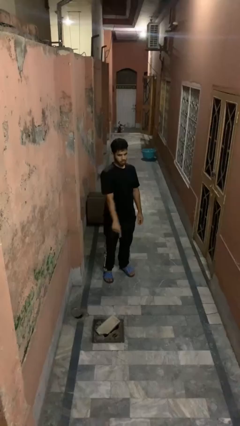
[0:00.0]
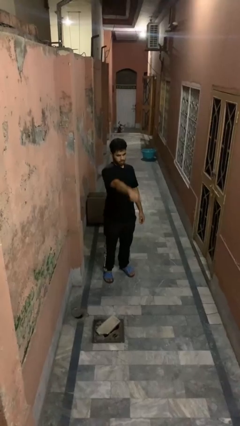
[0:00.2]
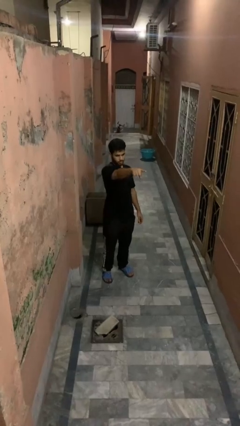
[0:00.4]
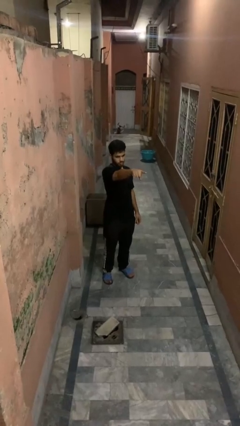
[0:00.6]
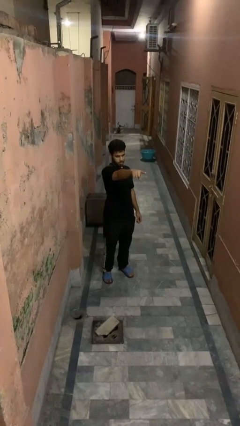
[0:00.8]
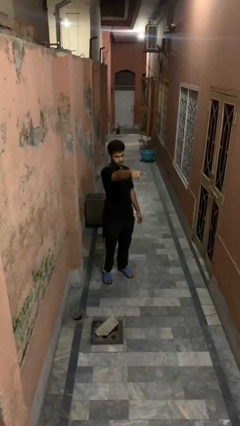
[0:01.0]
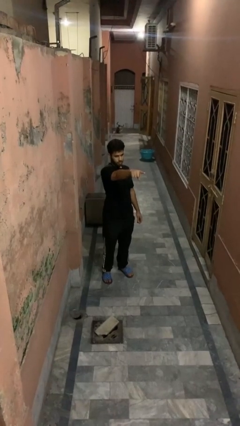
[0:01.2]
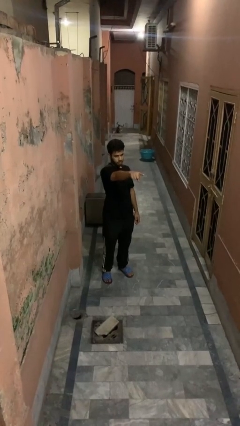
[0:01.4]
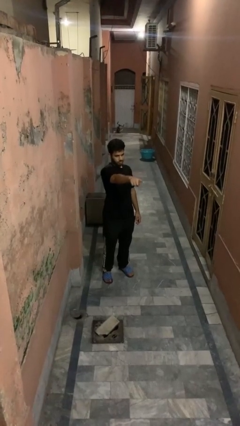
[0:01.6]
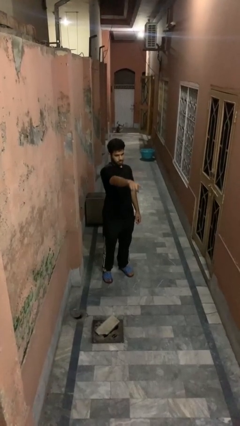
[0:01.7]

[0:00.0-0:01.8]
person points at person

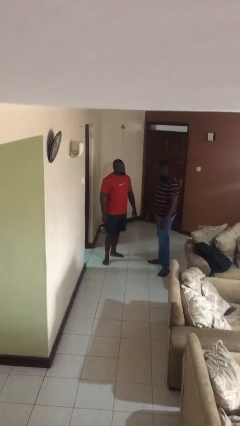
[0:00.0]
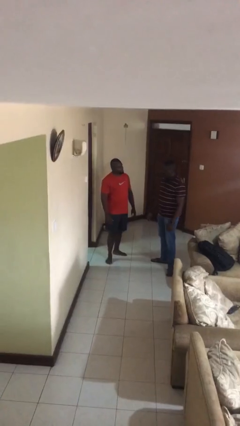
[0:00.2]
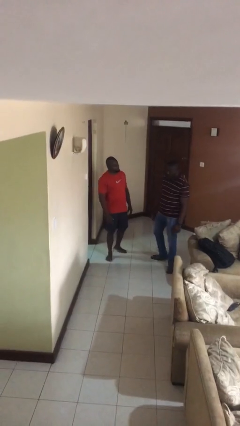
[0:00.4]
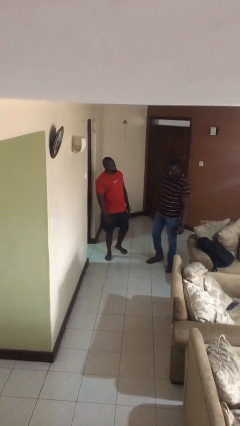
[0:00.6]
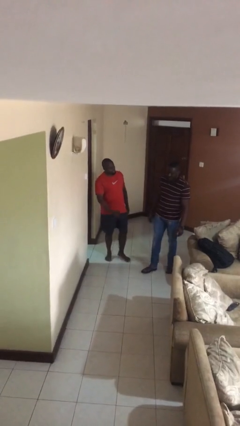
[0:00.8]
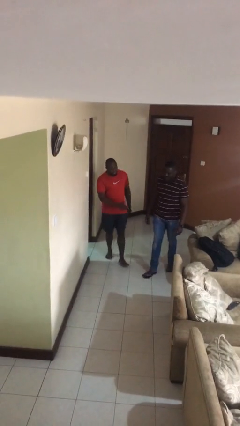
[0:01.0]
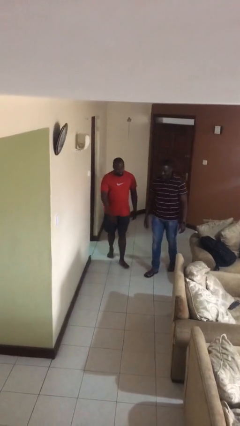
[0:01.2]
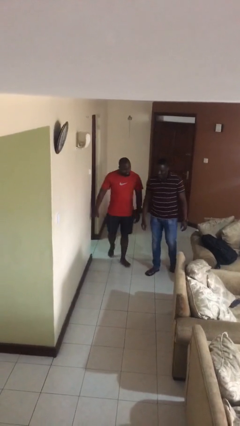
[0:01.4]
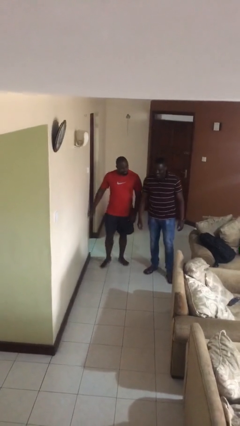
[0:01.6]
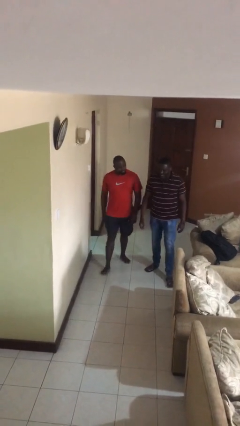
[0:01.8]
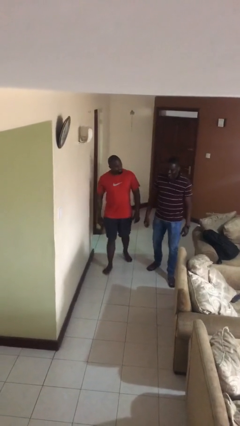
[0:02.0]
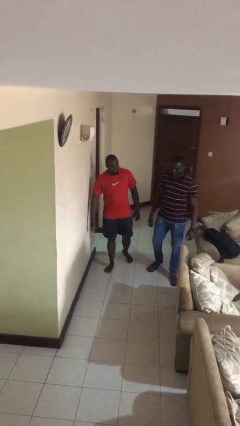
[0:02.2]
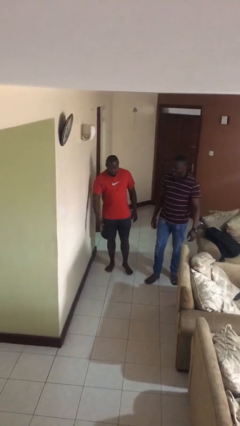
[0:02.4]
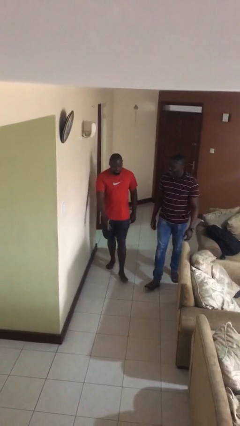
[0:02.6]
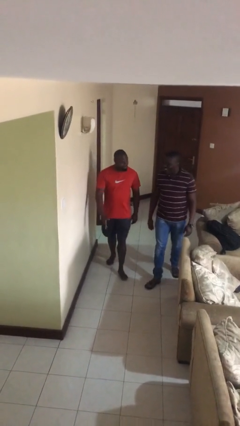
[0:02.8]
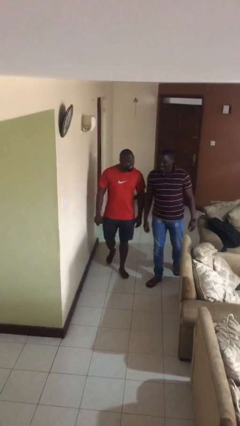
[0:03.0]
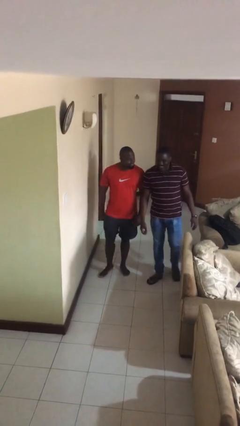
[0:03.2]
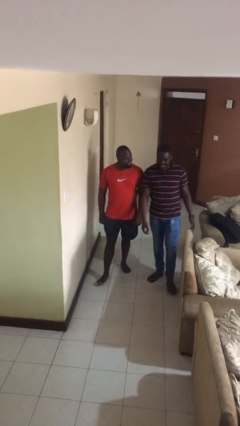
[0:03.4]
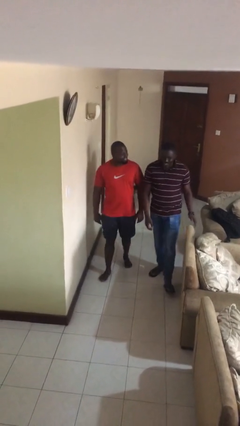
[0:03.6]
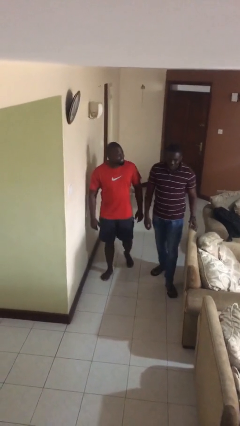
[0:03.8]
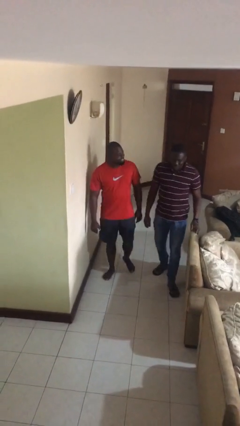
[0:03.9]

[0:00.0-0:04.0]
person talks to person

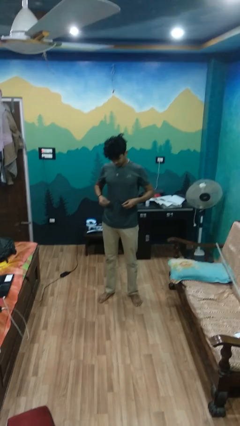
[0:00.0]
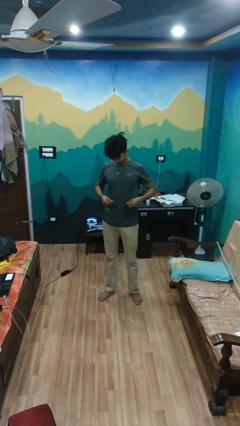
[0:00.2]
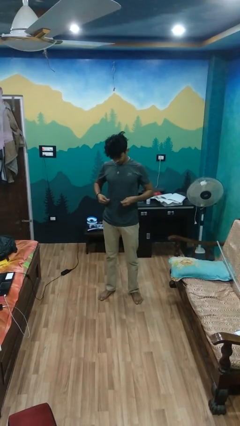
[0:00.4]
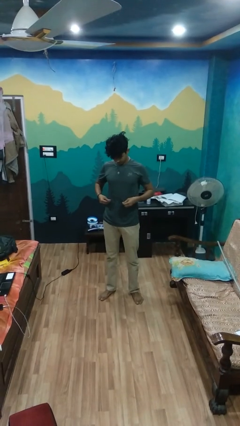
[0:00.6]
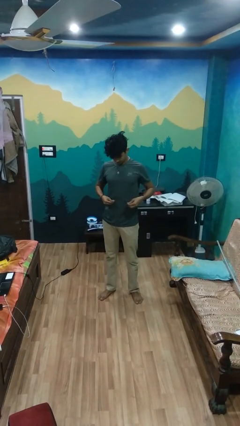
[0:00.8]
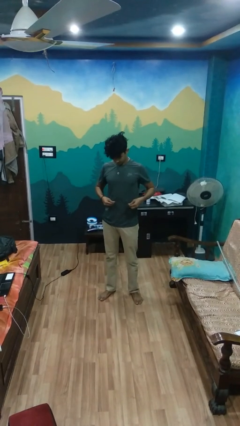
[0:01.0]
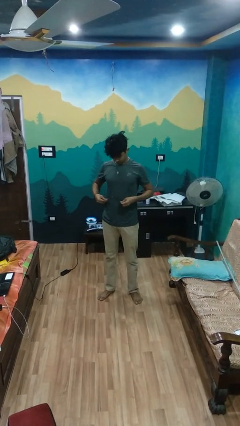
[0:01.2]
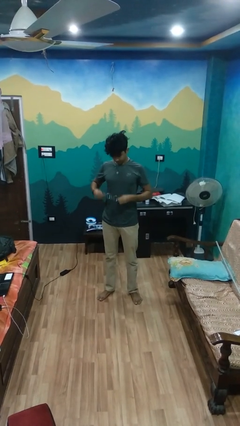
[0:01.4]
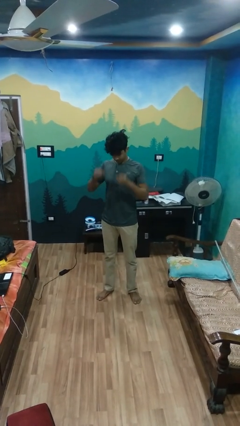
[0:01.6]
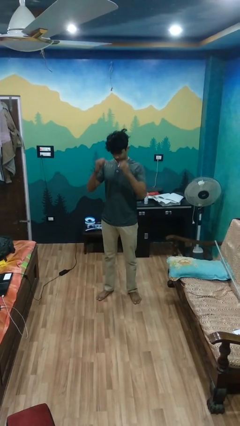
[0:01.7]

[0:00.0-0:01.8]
person cleans eyeglasses

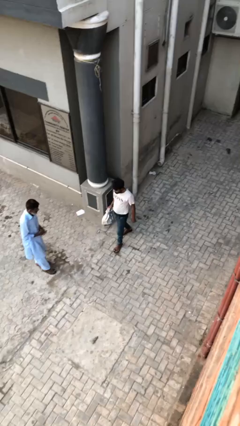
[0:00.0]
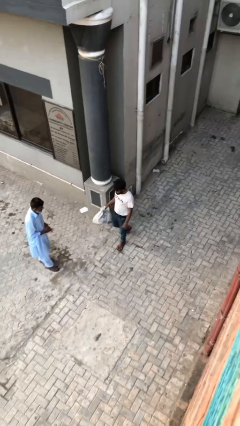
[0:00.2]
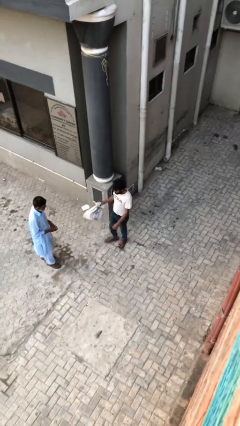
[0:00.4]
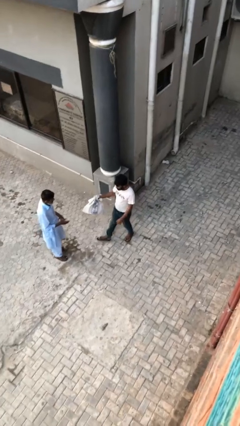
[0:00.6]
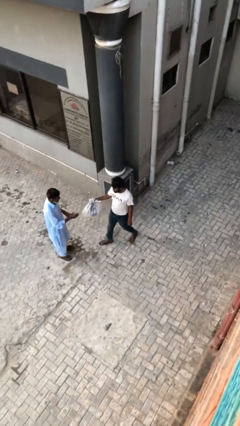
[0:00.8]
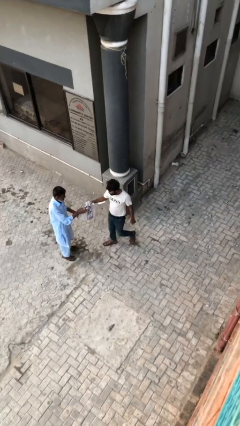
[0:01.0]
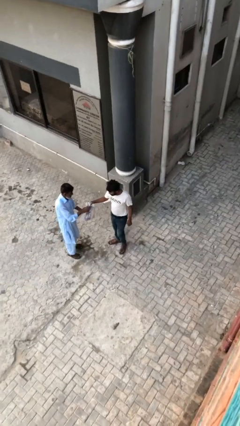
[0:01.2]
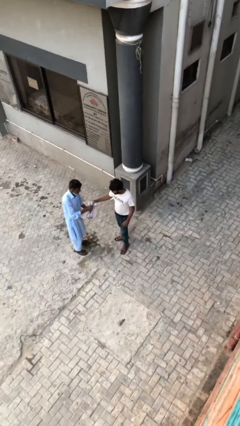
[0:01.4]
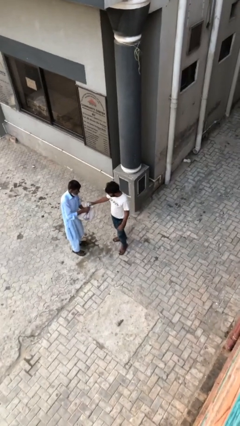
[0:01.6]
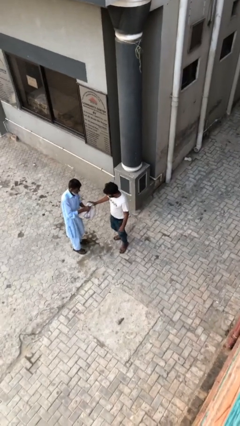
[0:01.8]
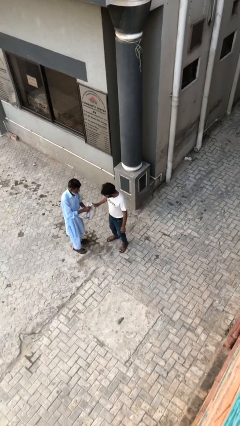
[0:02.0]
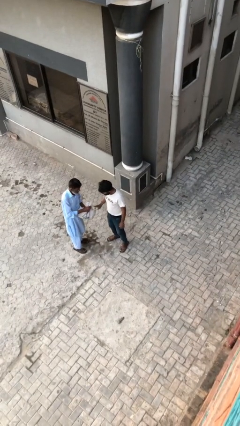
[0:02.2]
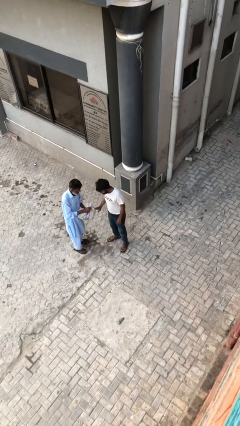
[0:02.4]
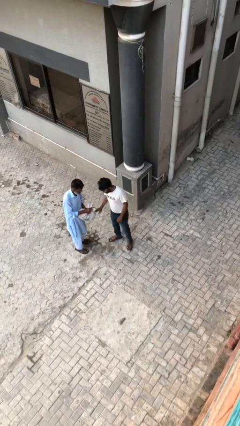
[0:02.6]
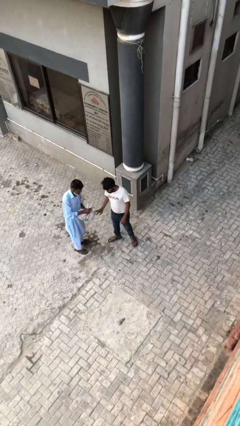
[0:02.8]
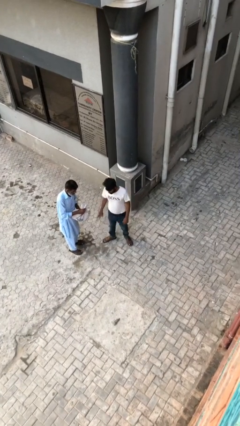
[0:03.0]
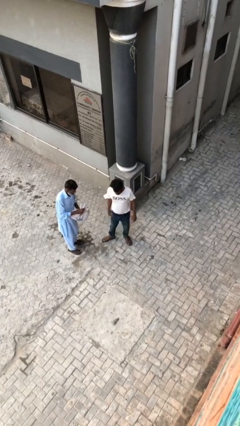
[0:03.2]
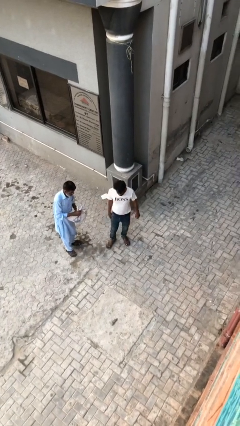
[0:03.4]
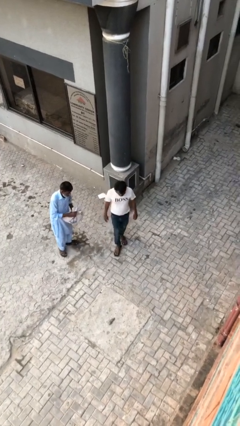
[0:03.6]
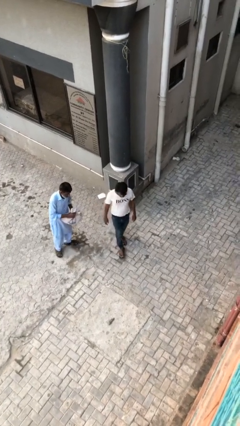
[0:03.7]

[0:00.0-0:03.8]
person transfers object to person

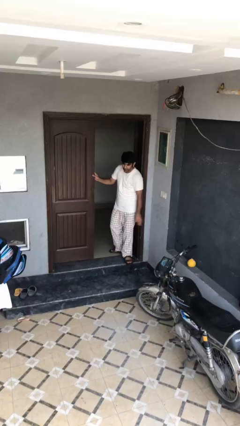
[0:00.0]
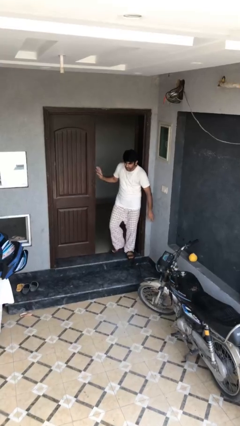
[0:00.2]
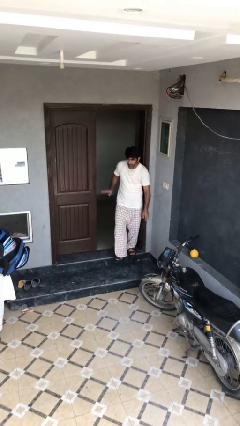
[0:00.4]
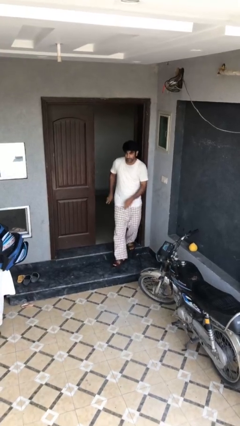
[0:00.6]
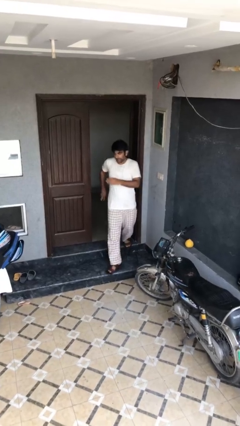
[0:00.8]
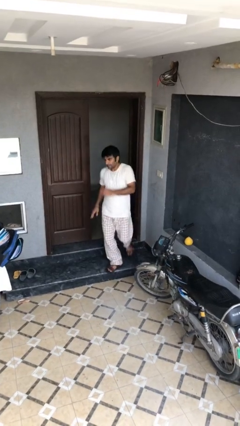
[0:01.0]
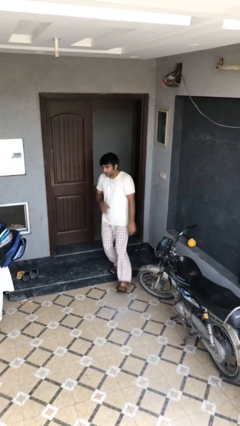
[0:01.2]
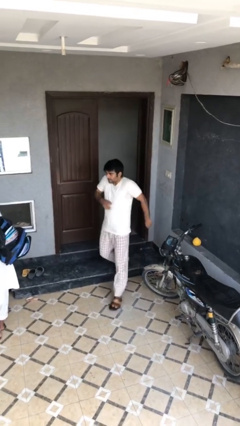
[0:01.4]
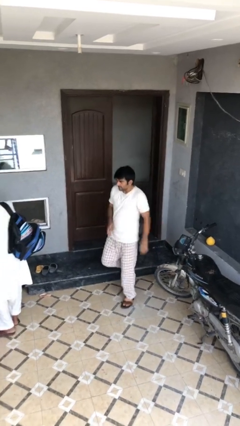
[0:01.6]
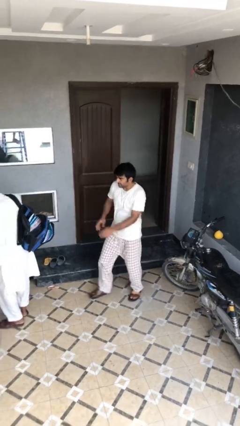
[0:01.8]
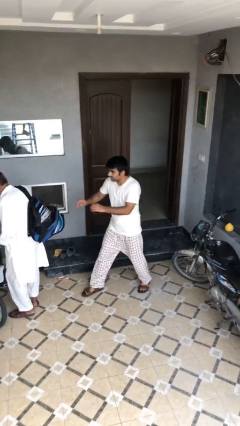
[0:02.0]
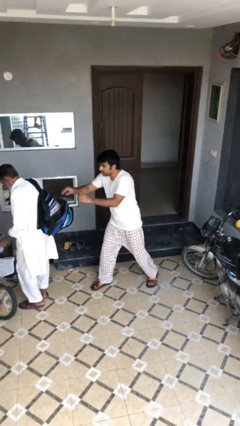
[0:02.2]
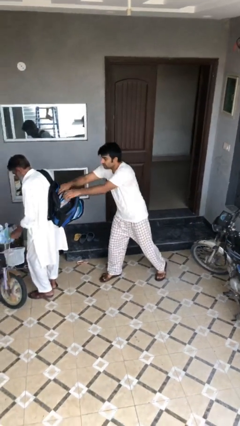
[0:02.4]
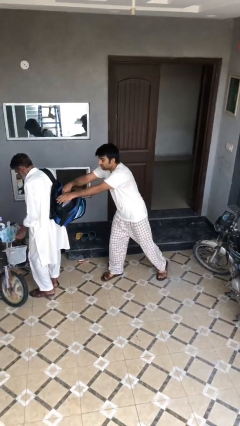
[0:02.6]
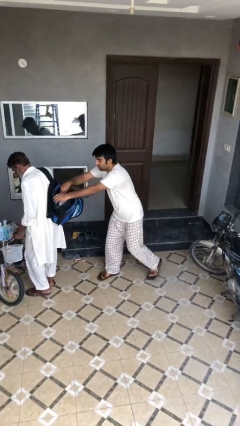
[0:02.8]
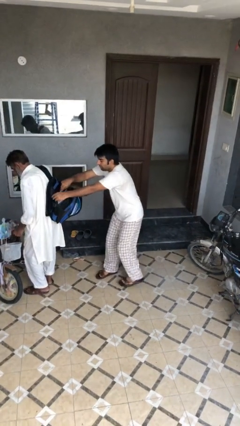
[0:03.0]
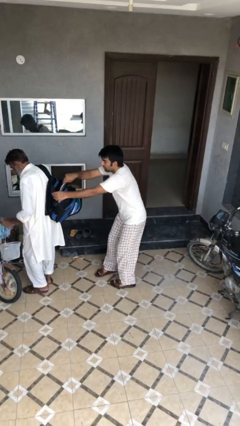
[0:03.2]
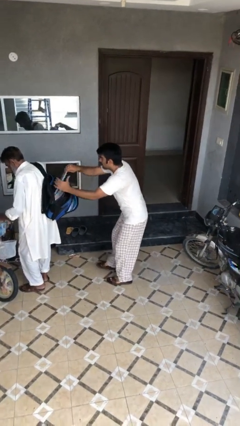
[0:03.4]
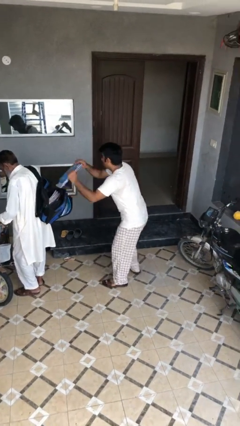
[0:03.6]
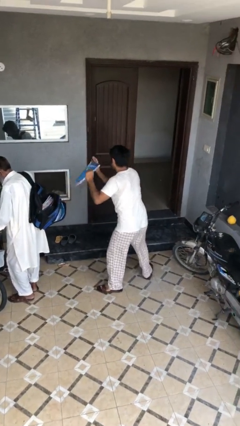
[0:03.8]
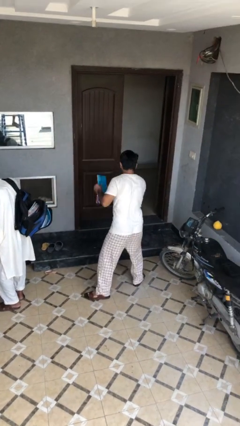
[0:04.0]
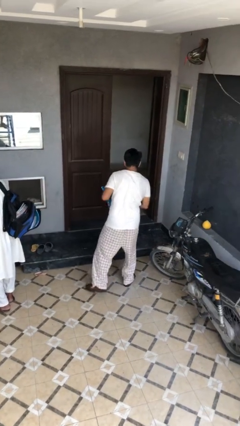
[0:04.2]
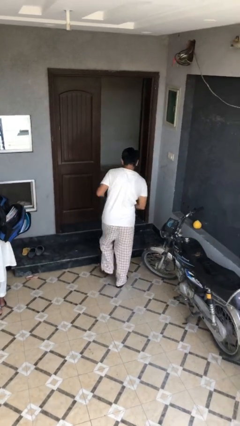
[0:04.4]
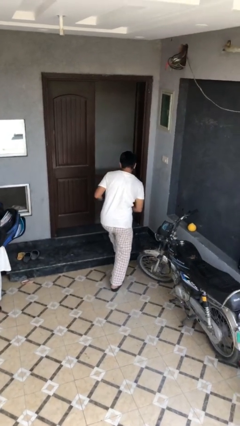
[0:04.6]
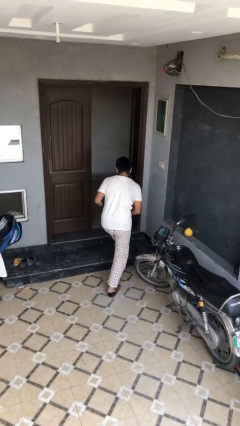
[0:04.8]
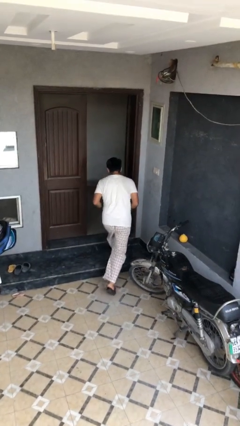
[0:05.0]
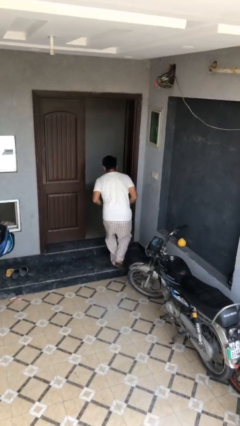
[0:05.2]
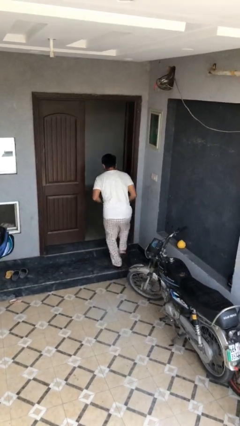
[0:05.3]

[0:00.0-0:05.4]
person steals object from person

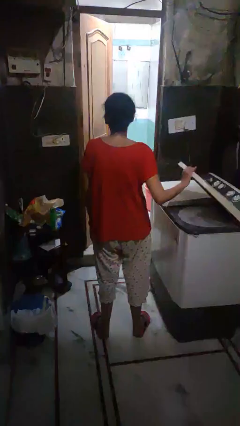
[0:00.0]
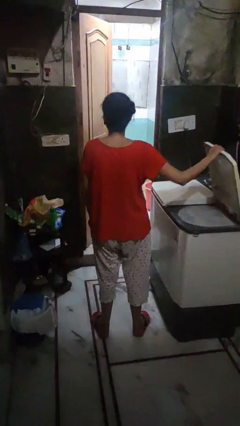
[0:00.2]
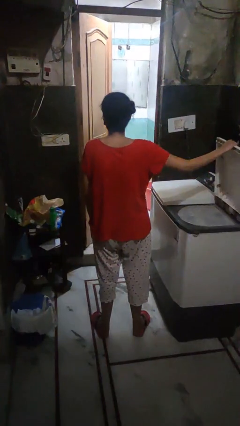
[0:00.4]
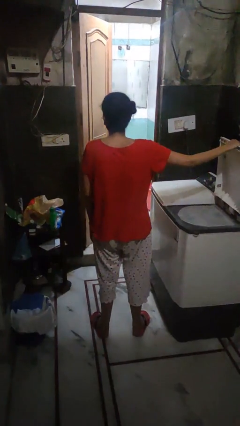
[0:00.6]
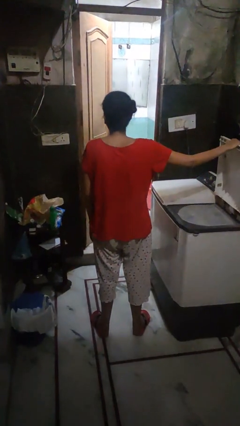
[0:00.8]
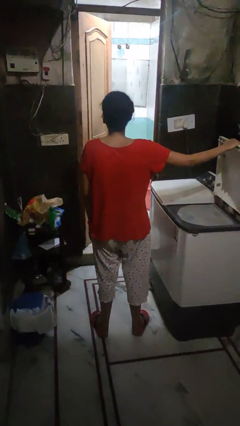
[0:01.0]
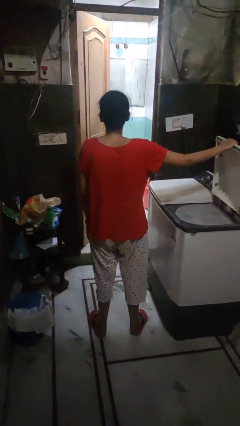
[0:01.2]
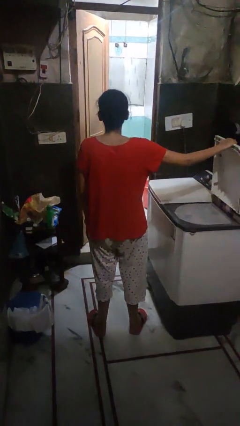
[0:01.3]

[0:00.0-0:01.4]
person opens clothes washer
